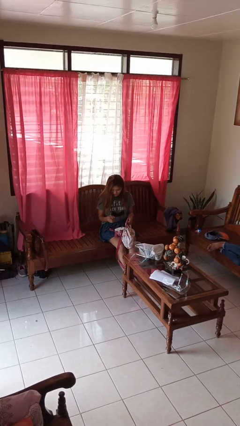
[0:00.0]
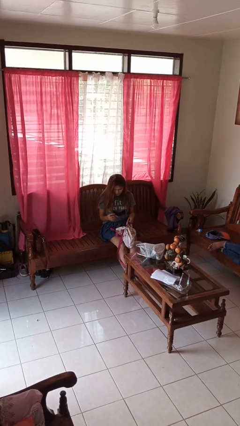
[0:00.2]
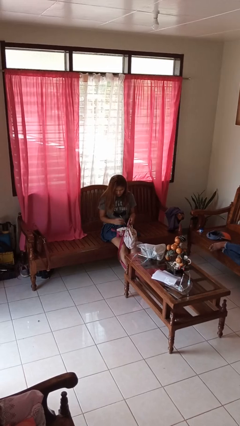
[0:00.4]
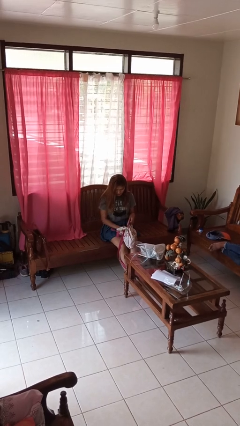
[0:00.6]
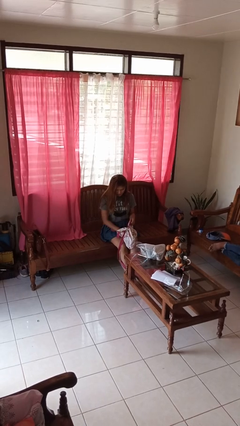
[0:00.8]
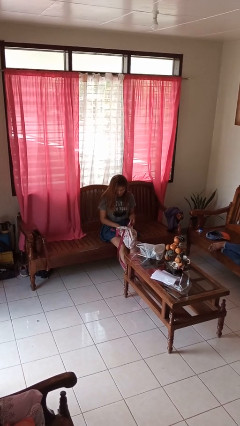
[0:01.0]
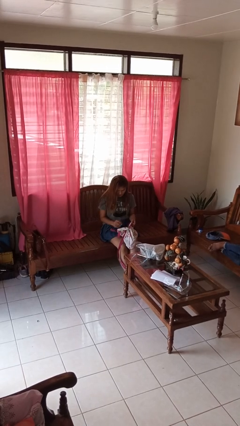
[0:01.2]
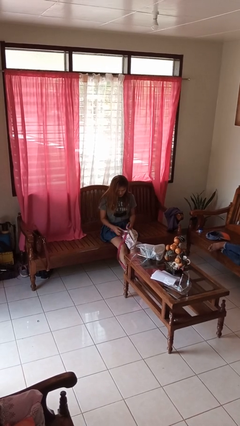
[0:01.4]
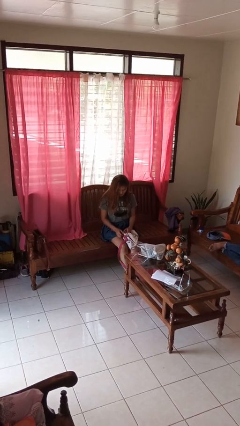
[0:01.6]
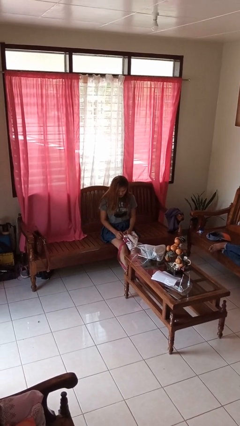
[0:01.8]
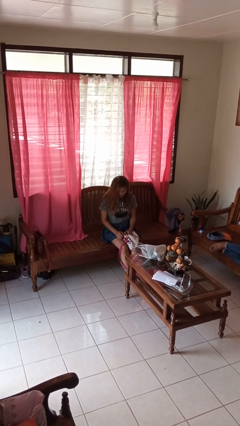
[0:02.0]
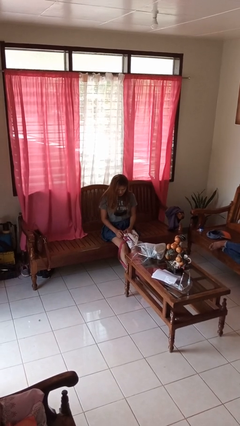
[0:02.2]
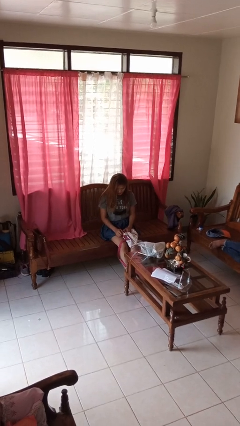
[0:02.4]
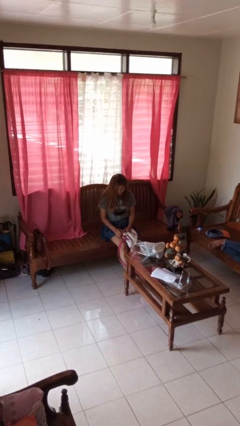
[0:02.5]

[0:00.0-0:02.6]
person puts object into backpack

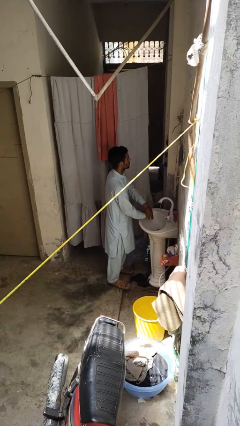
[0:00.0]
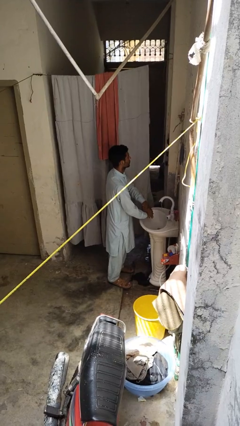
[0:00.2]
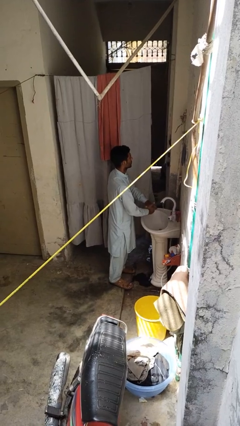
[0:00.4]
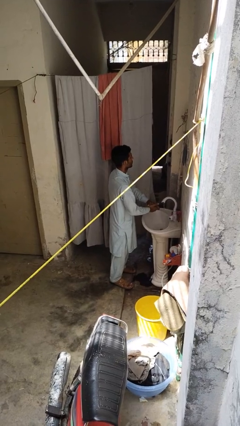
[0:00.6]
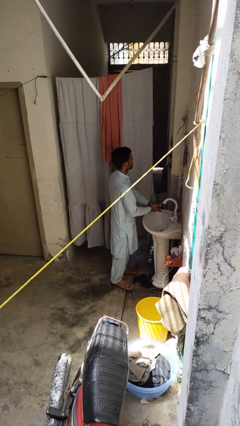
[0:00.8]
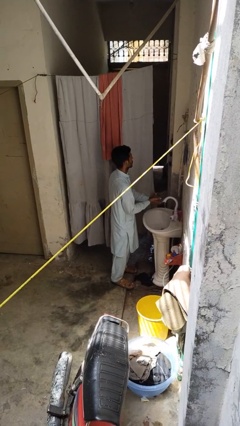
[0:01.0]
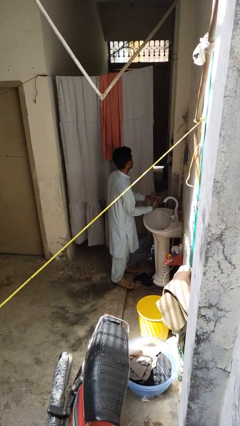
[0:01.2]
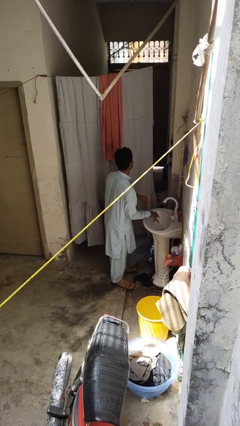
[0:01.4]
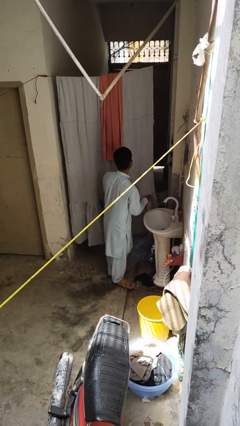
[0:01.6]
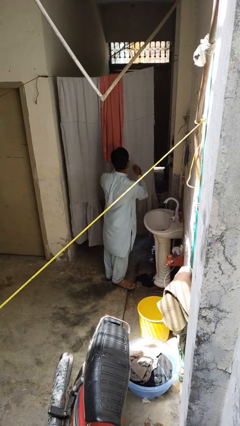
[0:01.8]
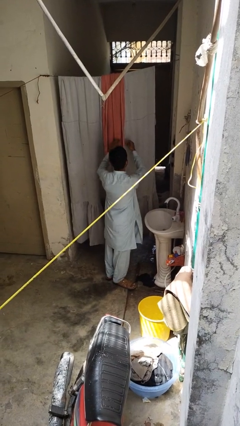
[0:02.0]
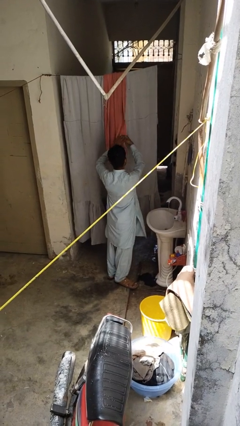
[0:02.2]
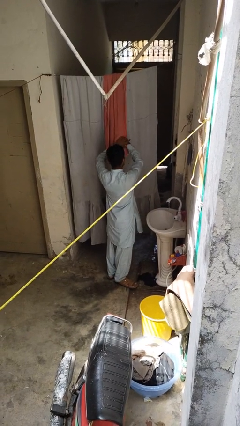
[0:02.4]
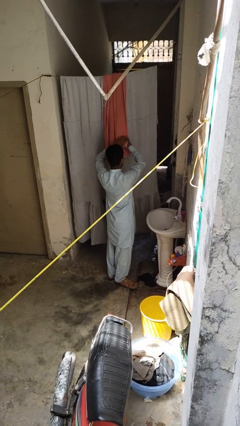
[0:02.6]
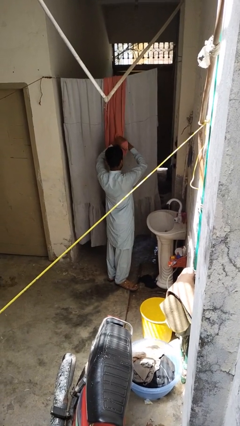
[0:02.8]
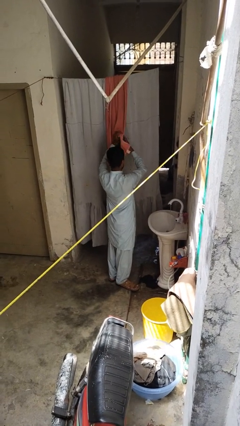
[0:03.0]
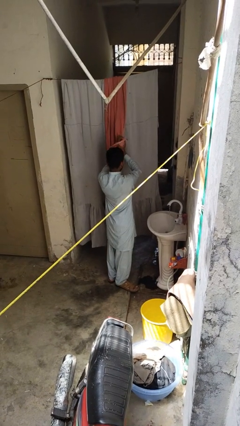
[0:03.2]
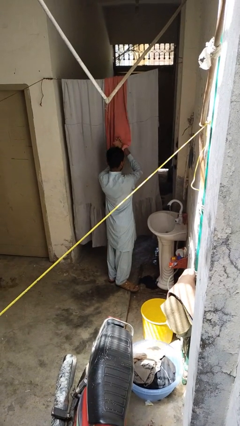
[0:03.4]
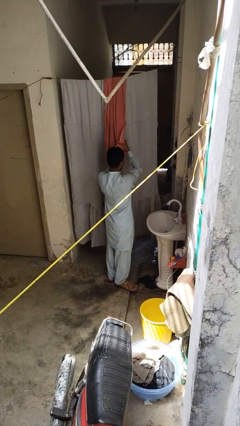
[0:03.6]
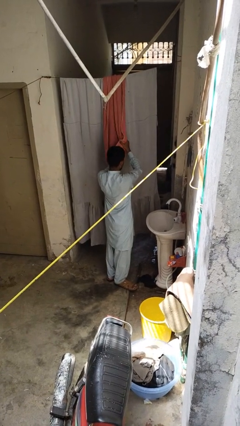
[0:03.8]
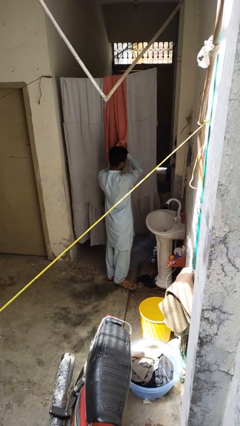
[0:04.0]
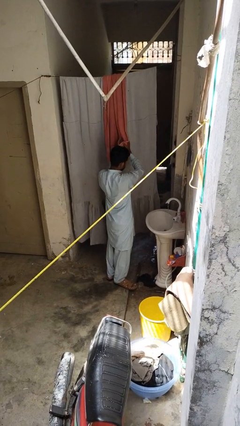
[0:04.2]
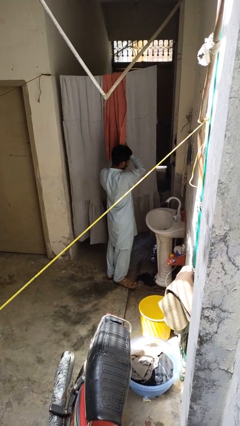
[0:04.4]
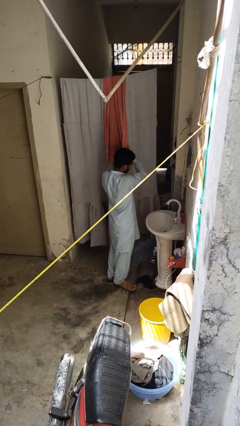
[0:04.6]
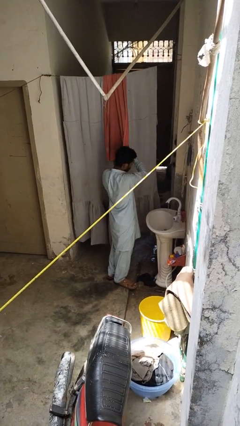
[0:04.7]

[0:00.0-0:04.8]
person dries hands with towel

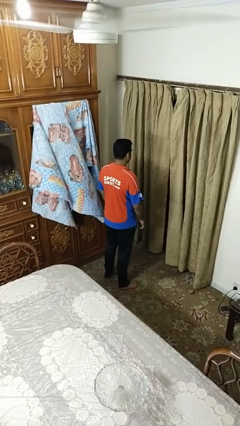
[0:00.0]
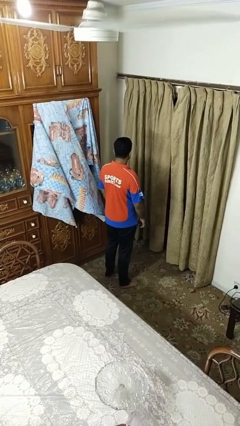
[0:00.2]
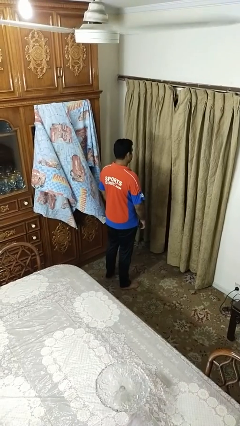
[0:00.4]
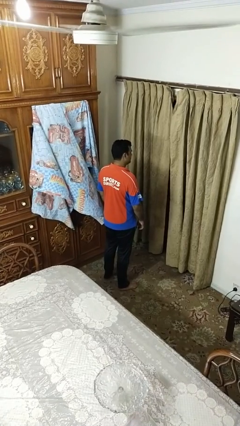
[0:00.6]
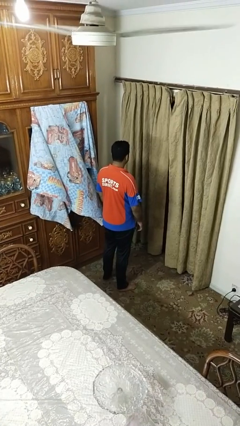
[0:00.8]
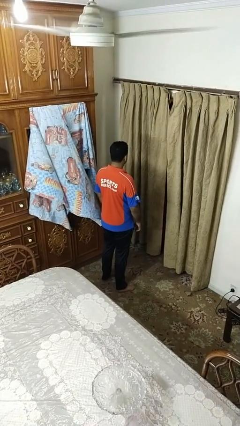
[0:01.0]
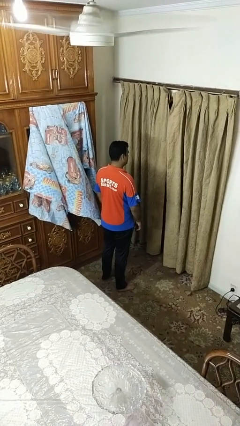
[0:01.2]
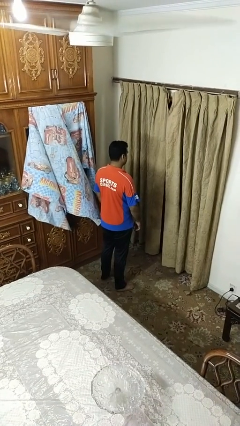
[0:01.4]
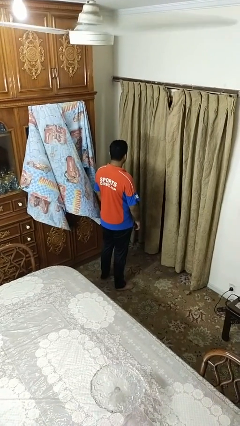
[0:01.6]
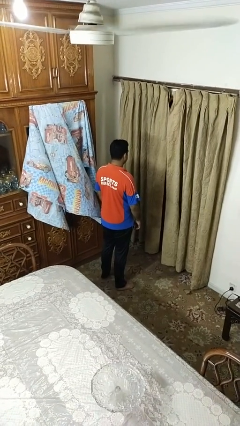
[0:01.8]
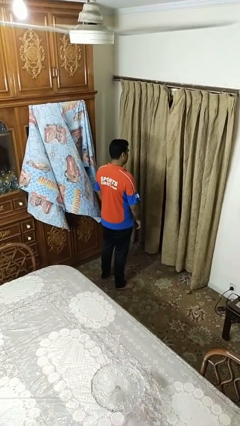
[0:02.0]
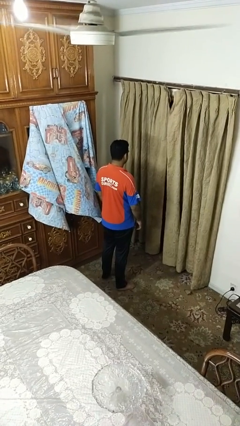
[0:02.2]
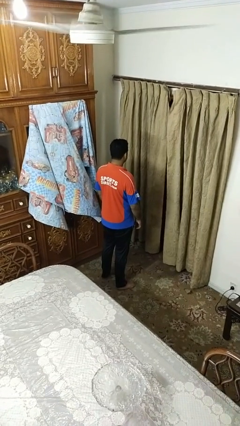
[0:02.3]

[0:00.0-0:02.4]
person shakes head

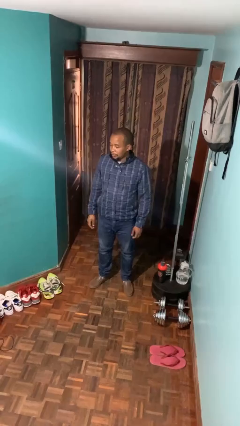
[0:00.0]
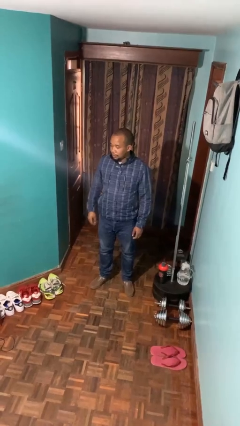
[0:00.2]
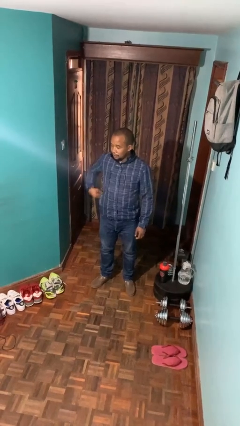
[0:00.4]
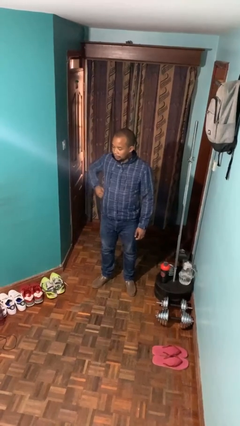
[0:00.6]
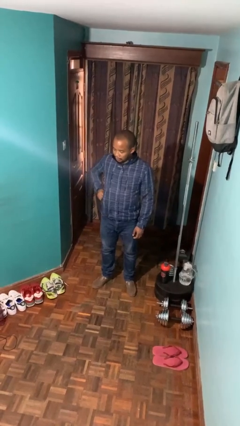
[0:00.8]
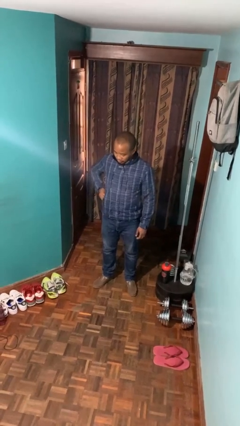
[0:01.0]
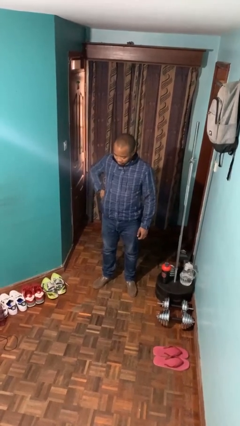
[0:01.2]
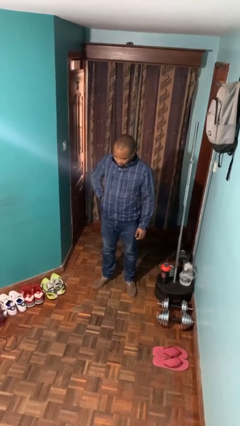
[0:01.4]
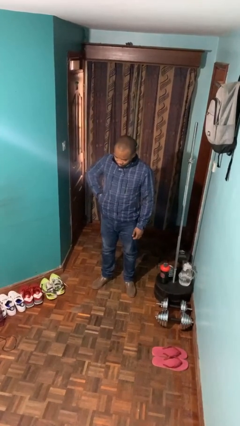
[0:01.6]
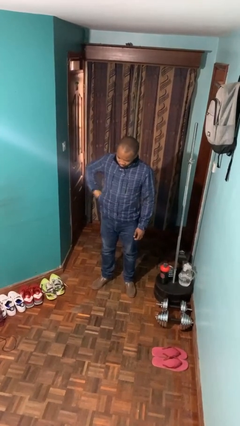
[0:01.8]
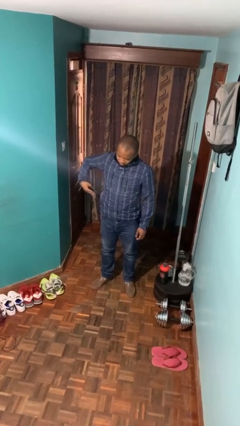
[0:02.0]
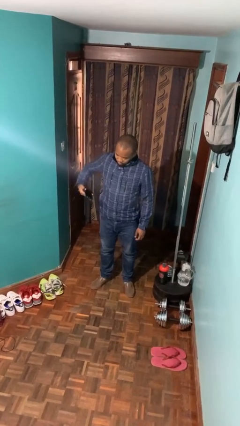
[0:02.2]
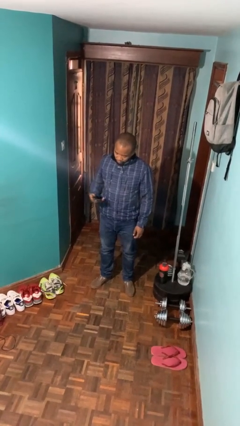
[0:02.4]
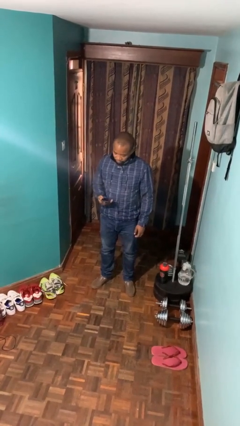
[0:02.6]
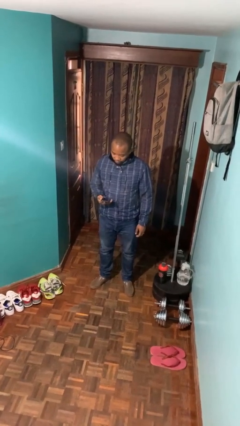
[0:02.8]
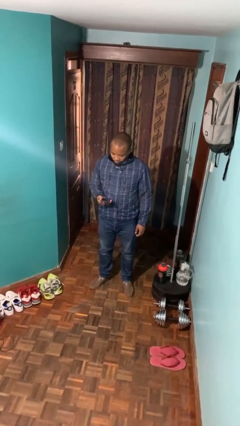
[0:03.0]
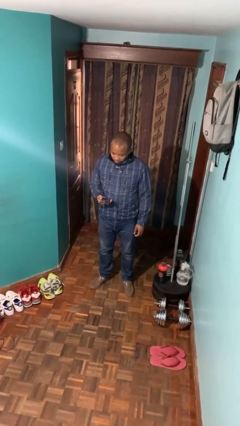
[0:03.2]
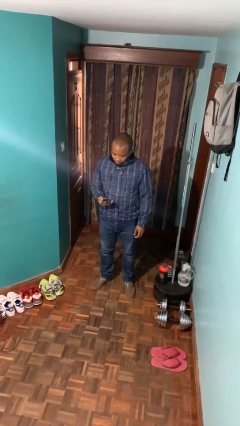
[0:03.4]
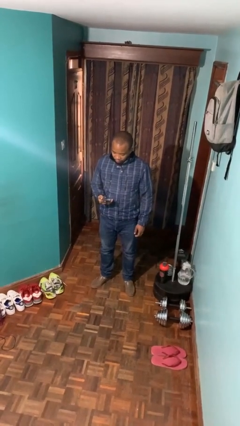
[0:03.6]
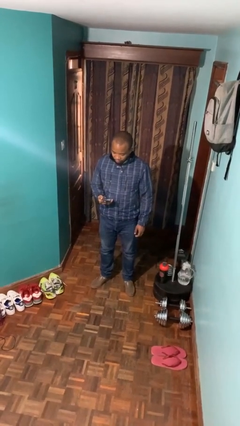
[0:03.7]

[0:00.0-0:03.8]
person takes phone from pocket

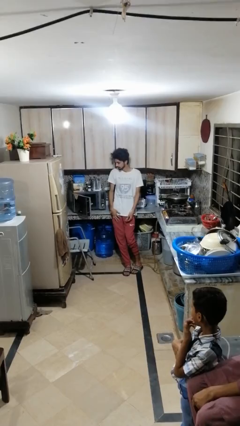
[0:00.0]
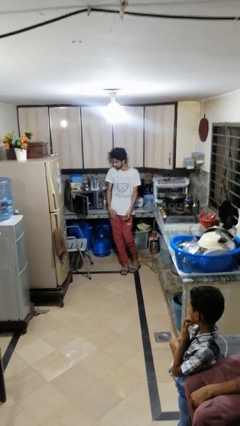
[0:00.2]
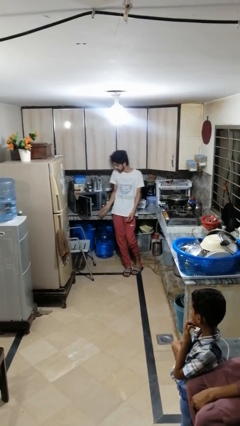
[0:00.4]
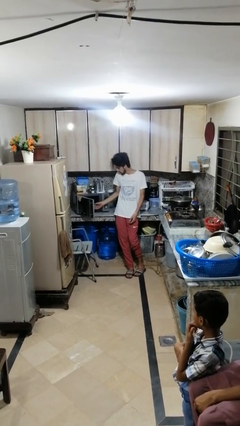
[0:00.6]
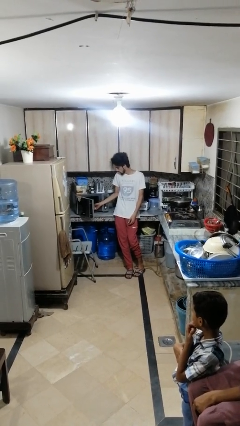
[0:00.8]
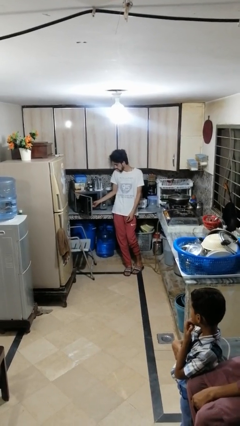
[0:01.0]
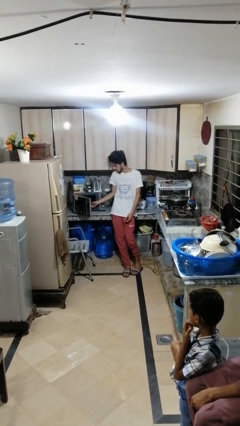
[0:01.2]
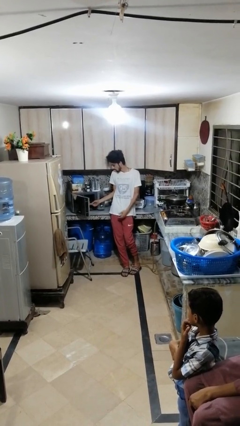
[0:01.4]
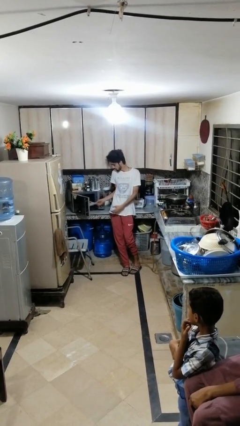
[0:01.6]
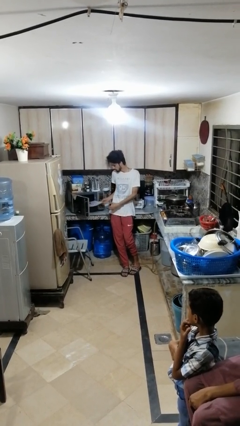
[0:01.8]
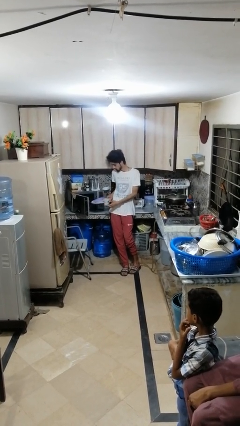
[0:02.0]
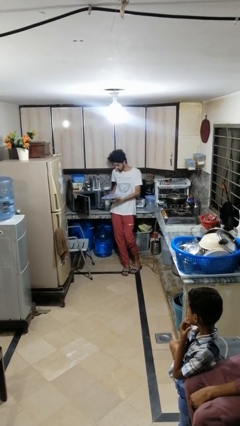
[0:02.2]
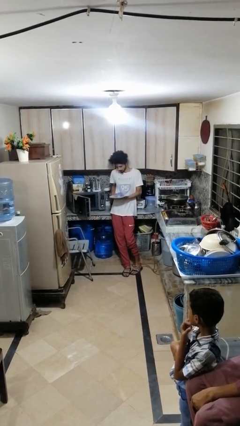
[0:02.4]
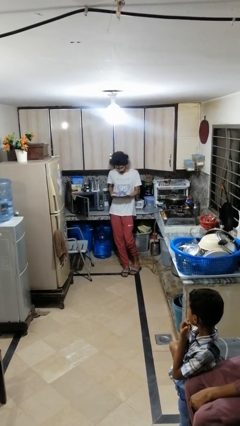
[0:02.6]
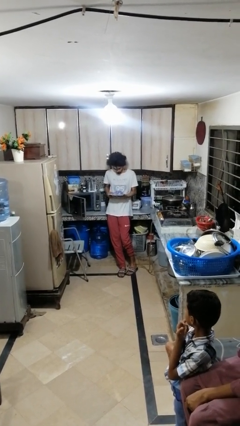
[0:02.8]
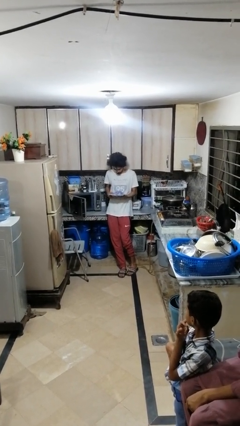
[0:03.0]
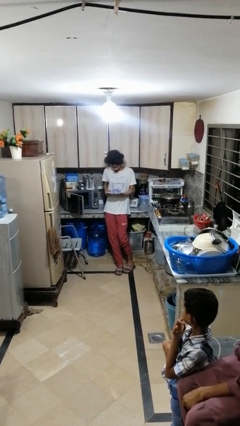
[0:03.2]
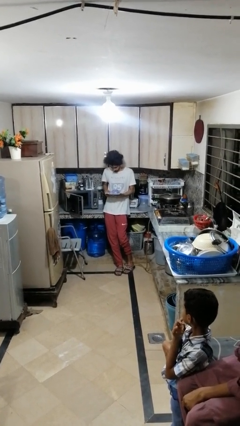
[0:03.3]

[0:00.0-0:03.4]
person takes object from oven

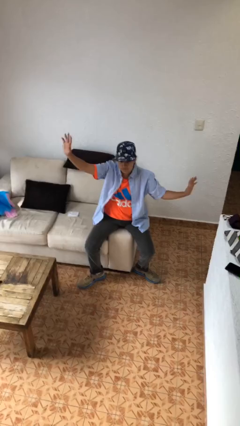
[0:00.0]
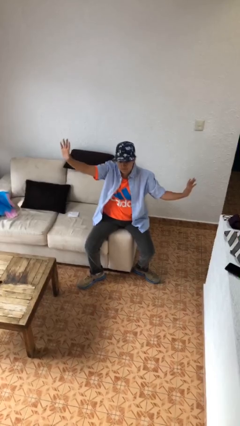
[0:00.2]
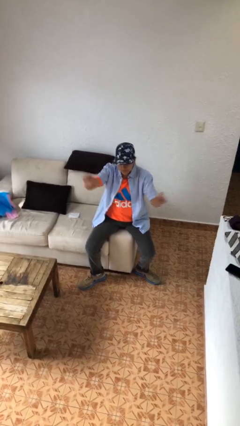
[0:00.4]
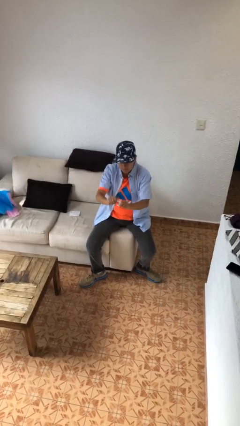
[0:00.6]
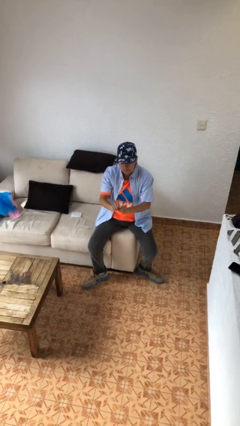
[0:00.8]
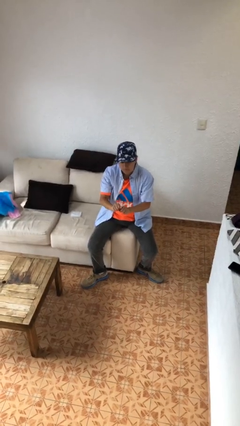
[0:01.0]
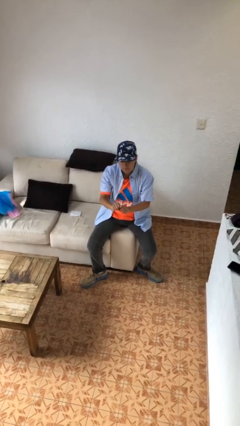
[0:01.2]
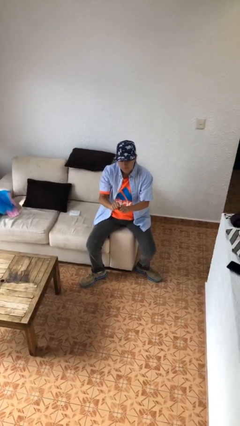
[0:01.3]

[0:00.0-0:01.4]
person gestures zoom out
